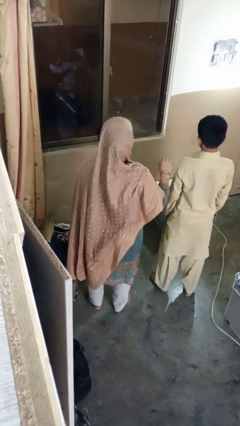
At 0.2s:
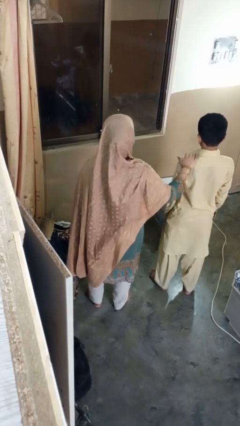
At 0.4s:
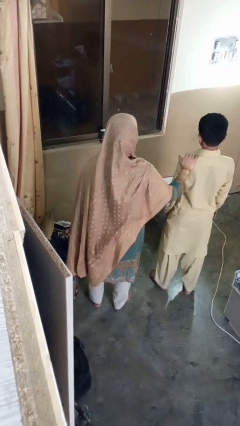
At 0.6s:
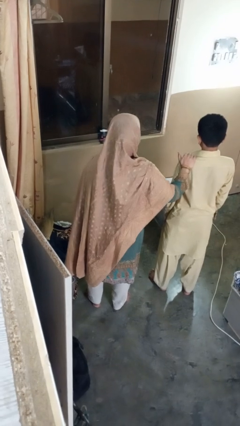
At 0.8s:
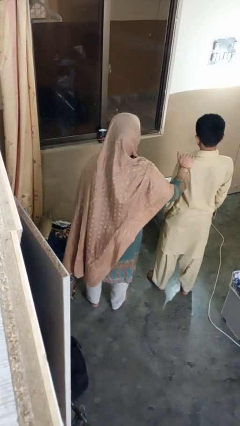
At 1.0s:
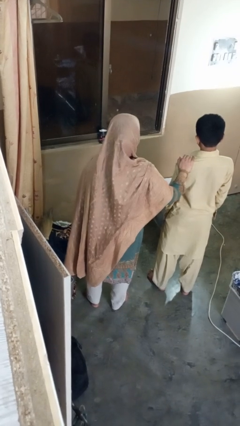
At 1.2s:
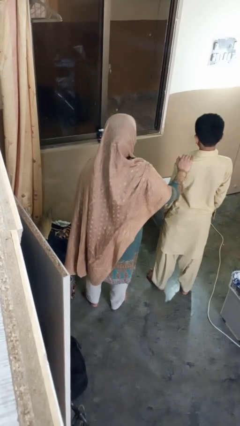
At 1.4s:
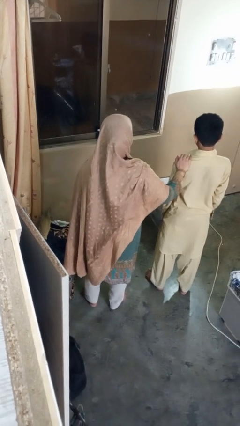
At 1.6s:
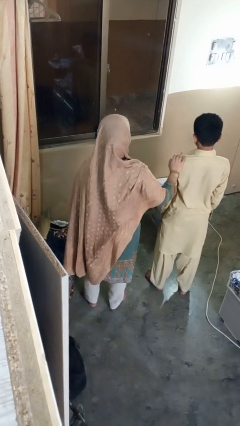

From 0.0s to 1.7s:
person grabs person by bicep

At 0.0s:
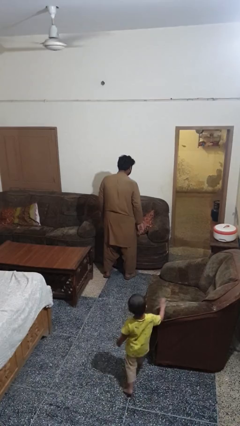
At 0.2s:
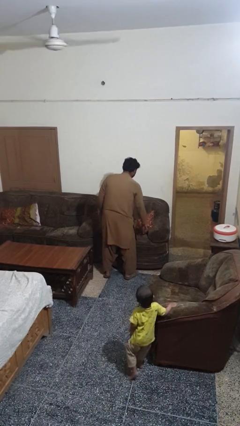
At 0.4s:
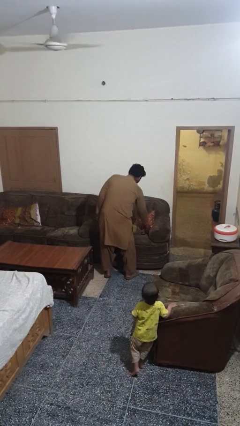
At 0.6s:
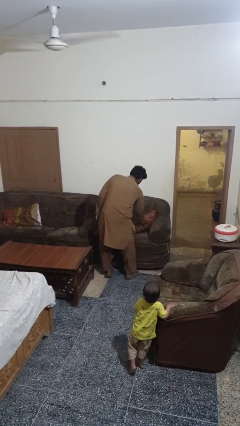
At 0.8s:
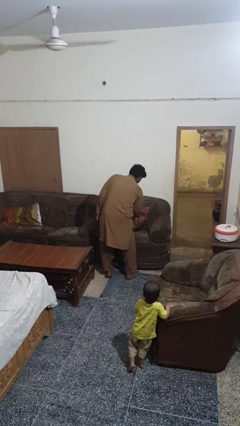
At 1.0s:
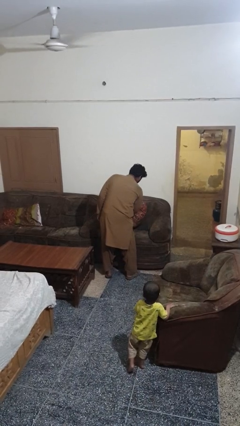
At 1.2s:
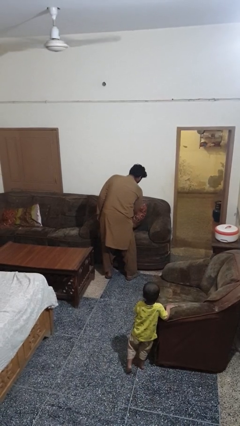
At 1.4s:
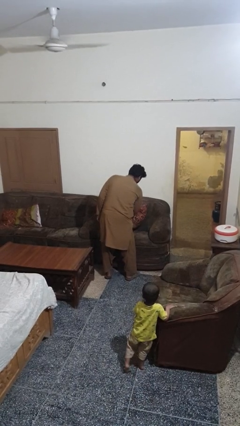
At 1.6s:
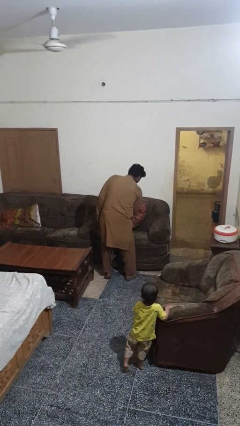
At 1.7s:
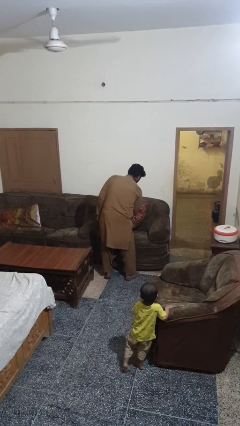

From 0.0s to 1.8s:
person searches in couch

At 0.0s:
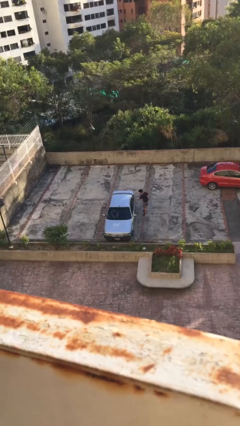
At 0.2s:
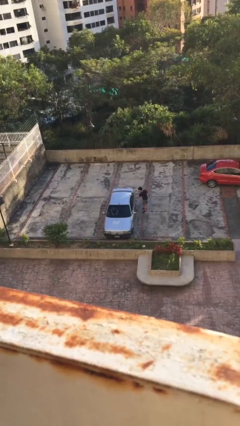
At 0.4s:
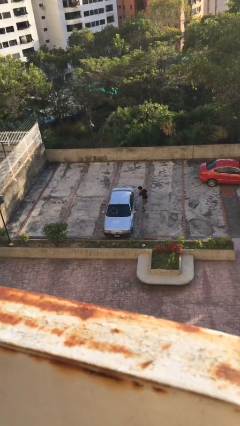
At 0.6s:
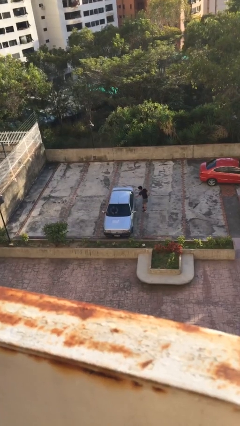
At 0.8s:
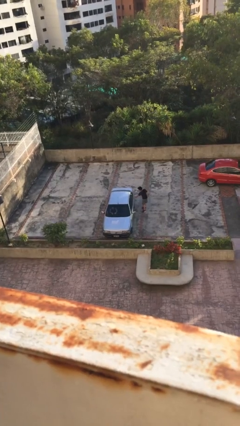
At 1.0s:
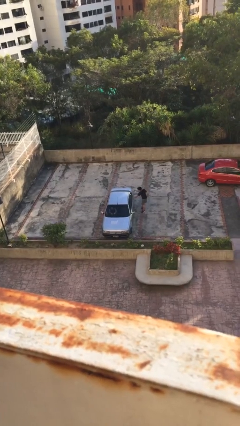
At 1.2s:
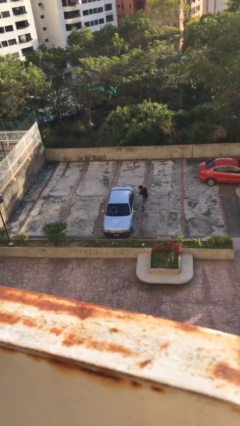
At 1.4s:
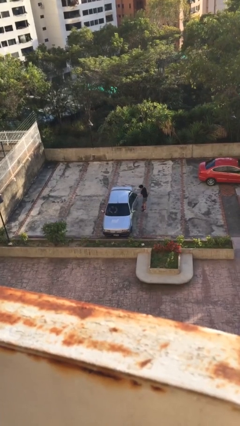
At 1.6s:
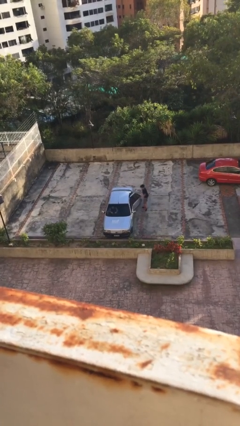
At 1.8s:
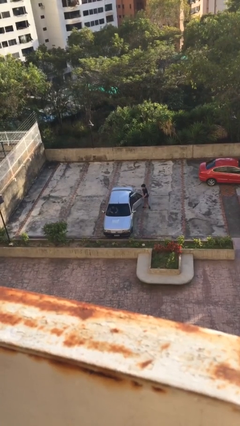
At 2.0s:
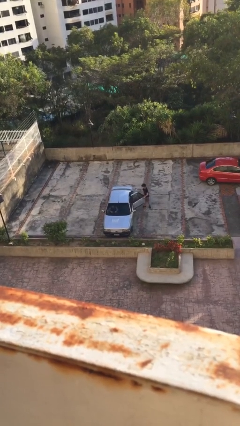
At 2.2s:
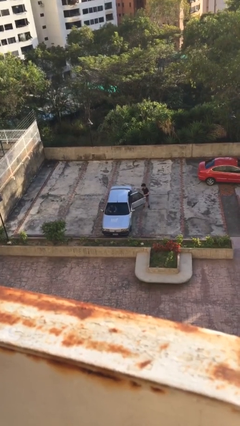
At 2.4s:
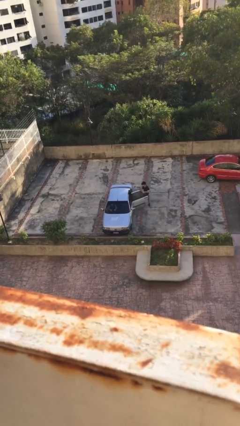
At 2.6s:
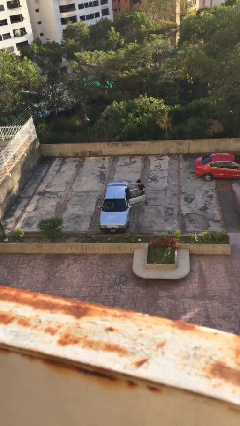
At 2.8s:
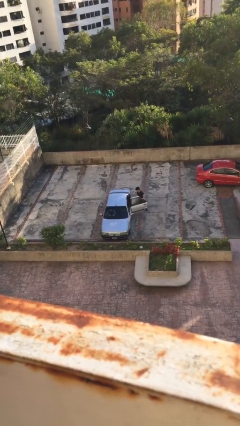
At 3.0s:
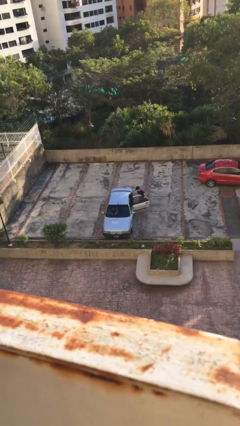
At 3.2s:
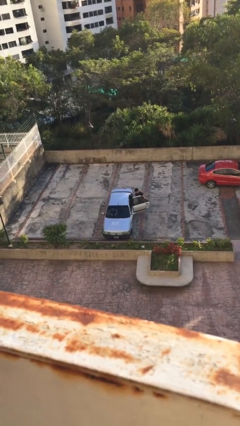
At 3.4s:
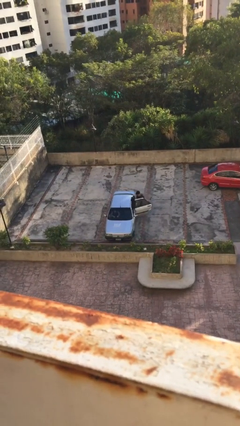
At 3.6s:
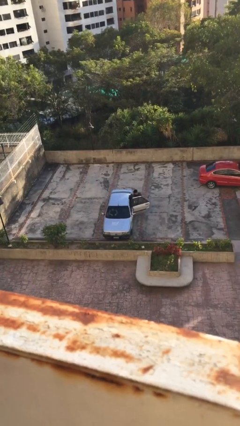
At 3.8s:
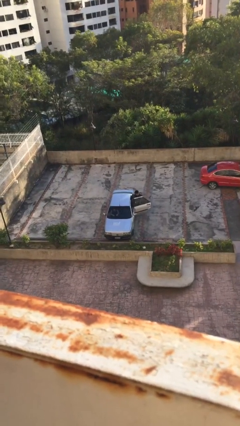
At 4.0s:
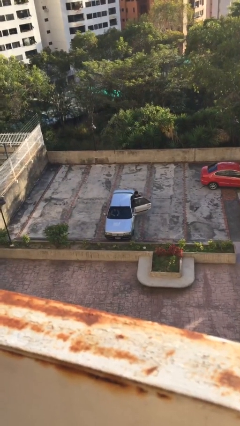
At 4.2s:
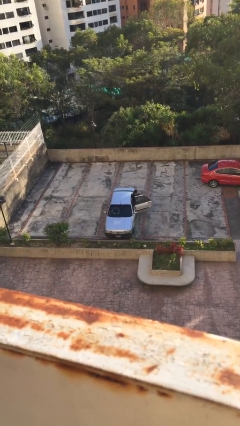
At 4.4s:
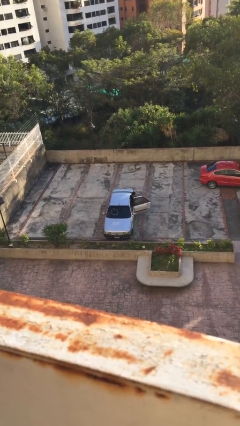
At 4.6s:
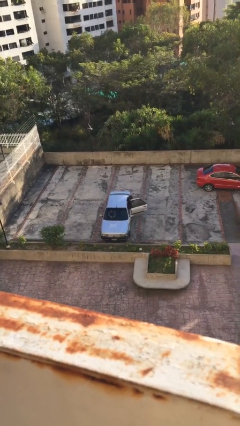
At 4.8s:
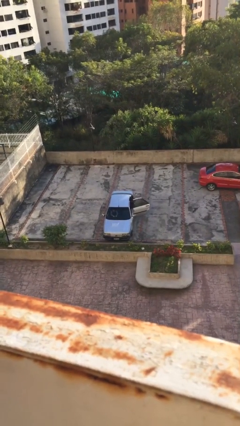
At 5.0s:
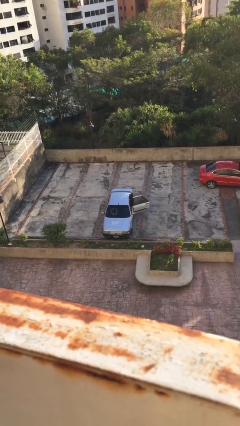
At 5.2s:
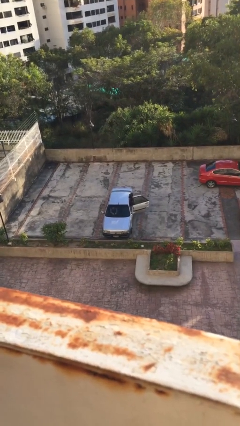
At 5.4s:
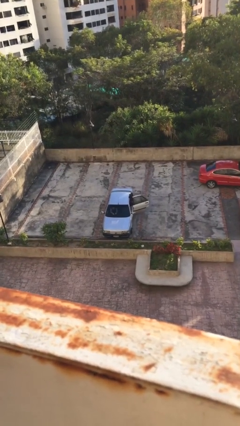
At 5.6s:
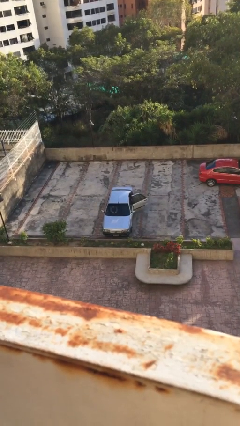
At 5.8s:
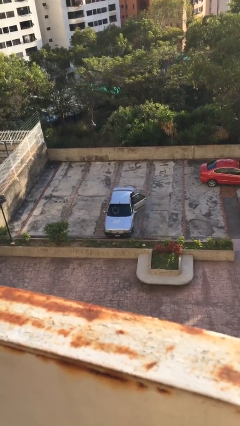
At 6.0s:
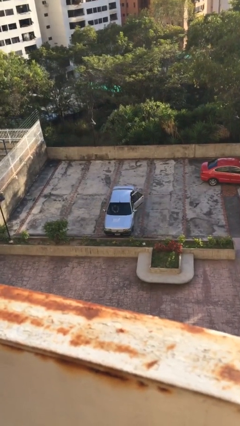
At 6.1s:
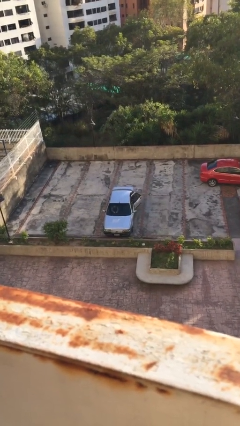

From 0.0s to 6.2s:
car picks up person

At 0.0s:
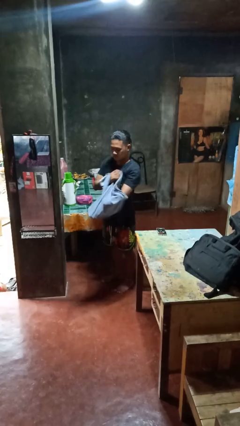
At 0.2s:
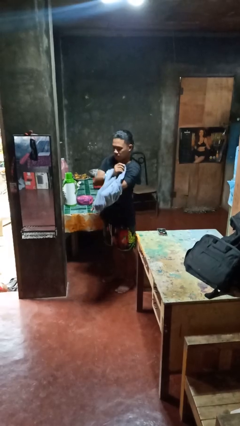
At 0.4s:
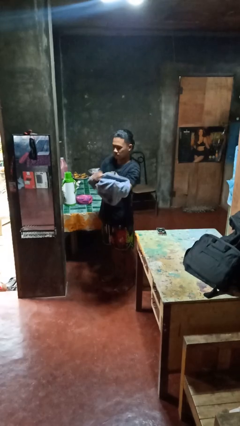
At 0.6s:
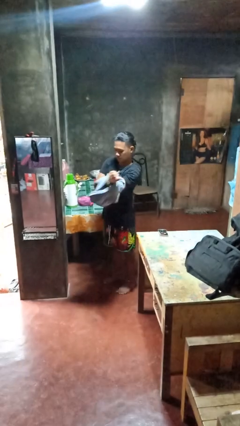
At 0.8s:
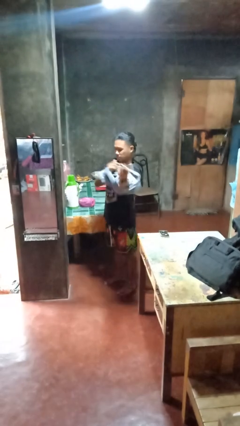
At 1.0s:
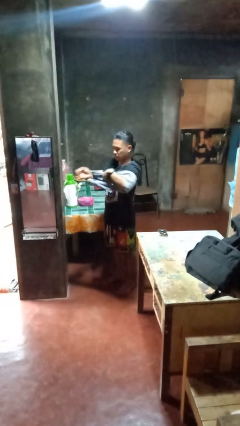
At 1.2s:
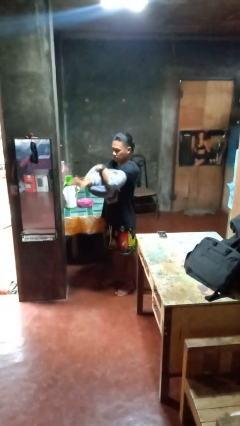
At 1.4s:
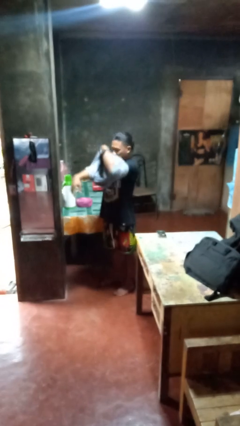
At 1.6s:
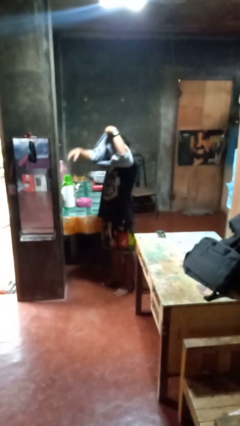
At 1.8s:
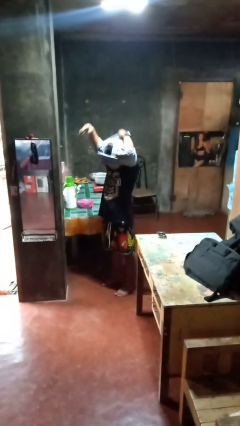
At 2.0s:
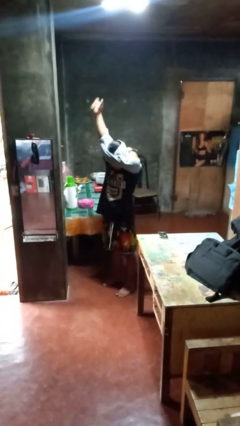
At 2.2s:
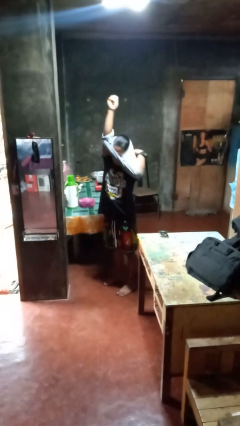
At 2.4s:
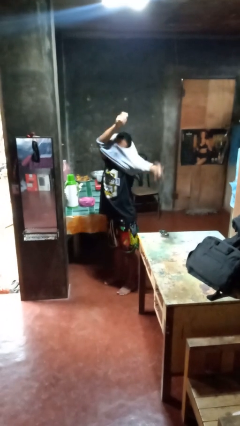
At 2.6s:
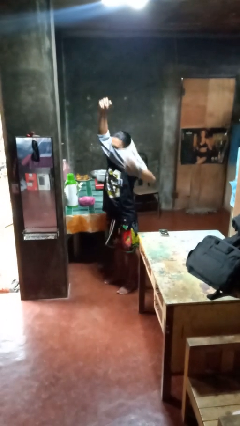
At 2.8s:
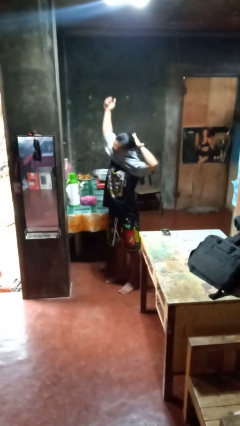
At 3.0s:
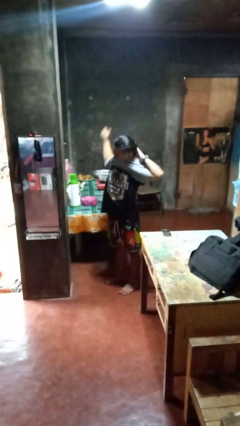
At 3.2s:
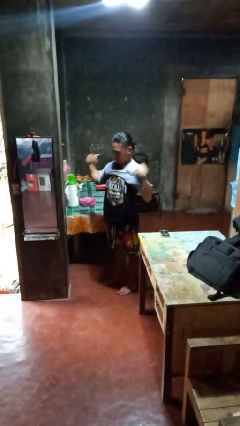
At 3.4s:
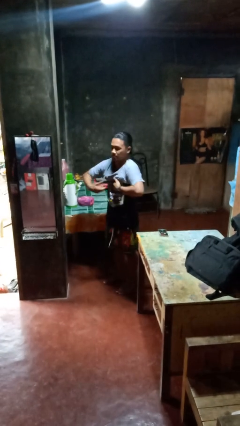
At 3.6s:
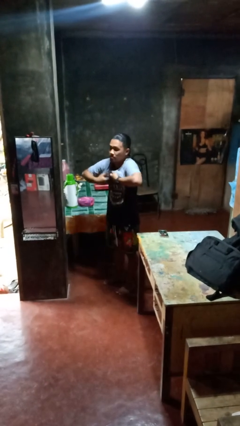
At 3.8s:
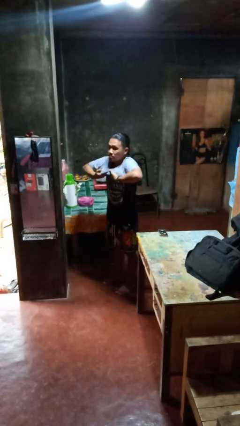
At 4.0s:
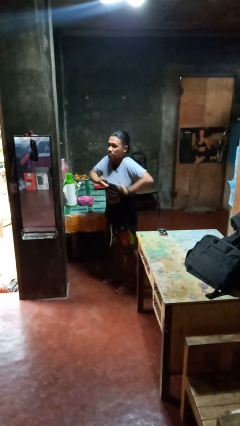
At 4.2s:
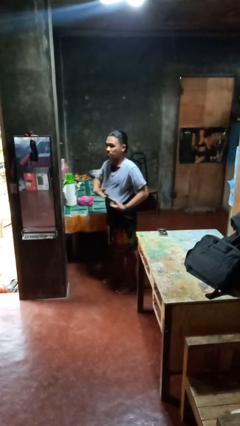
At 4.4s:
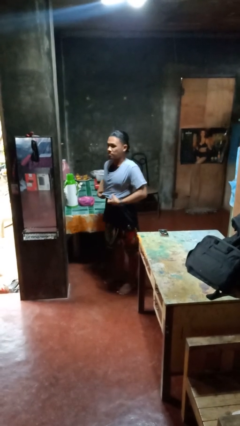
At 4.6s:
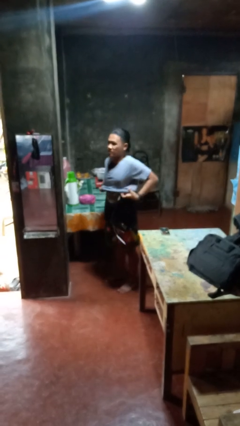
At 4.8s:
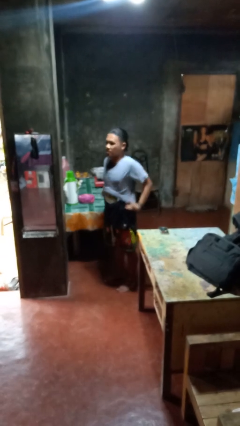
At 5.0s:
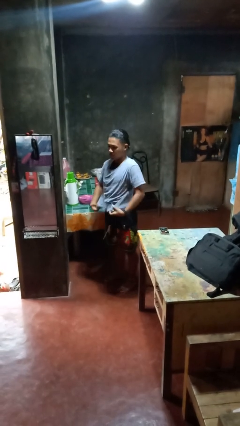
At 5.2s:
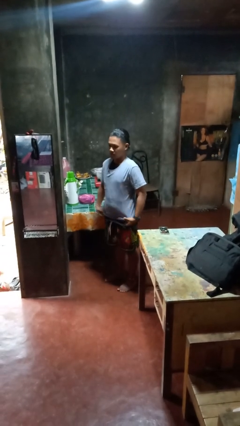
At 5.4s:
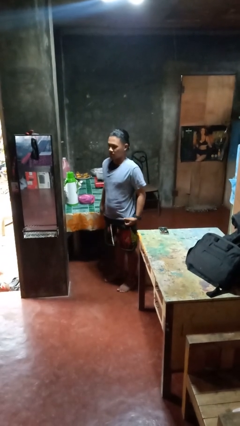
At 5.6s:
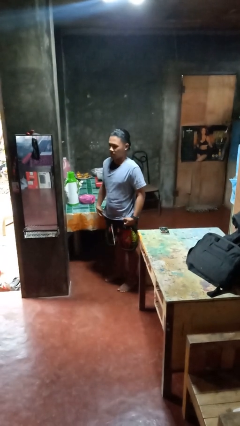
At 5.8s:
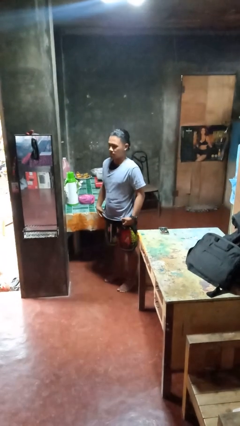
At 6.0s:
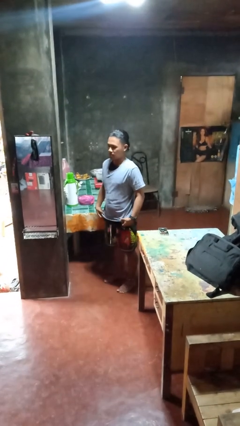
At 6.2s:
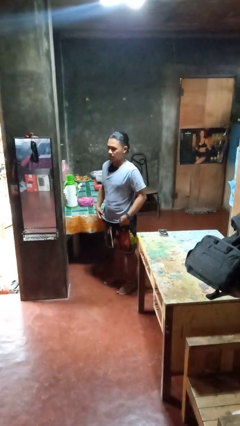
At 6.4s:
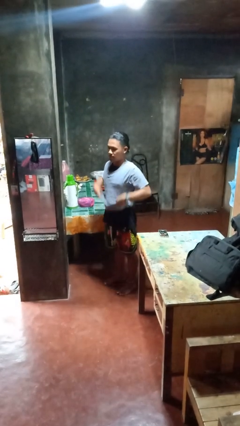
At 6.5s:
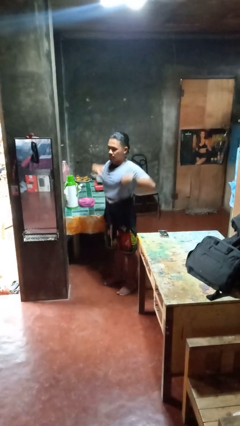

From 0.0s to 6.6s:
person puts on shirt

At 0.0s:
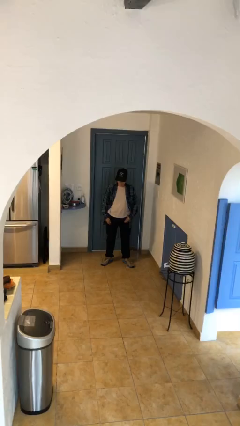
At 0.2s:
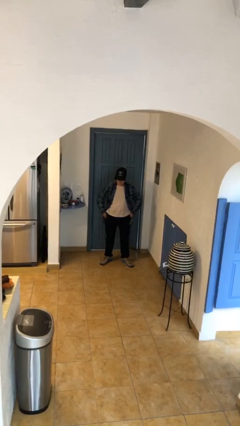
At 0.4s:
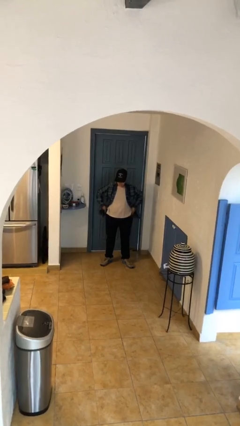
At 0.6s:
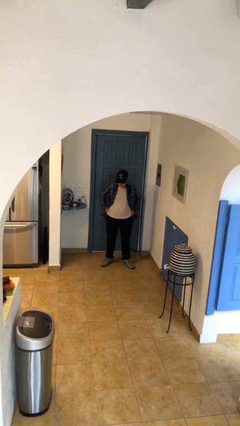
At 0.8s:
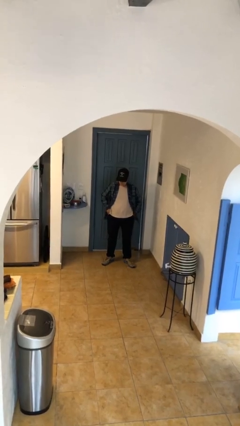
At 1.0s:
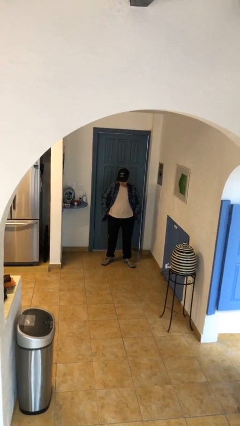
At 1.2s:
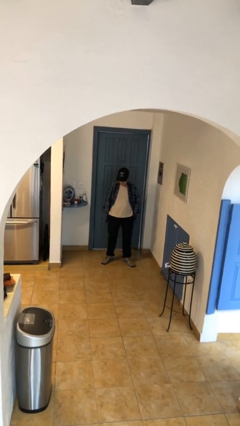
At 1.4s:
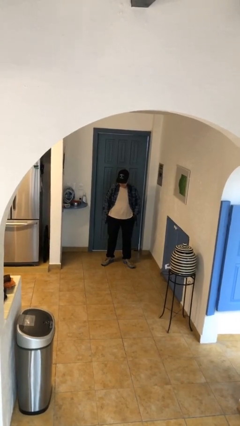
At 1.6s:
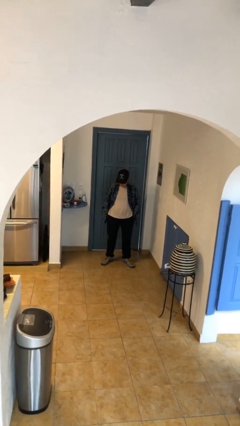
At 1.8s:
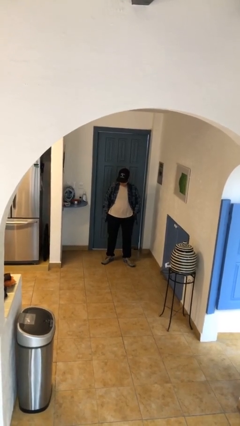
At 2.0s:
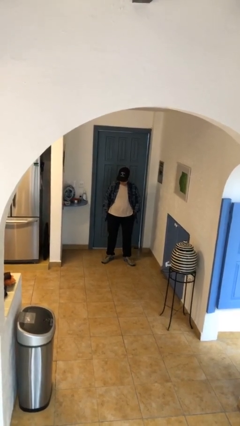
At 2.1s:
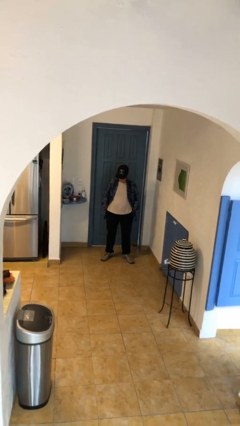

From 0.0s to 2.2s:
person puts hands in back pockets
